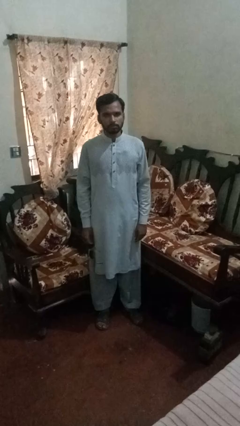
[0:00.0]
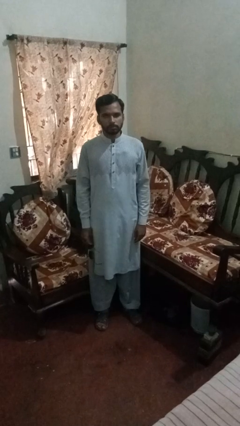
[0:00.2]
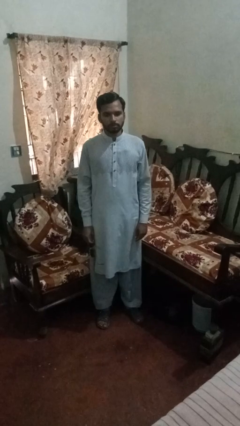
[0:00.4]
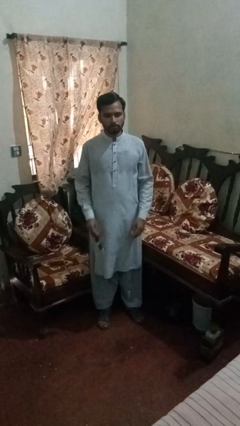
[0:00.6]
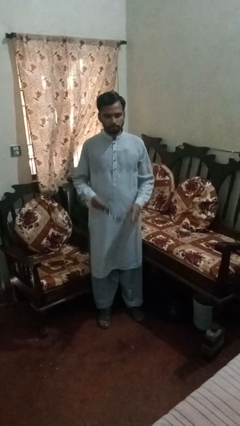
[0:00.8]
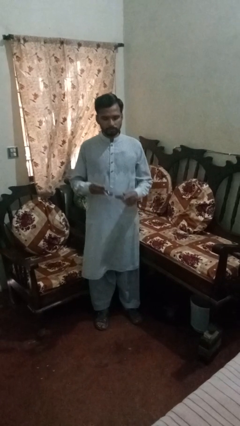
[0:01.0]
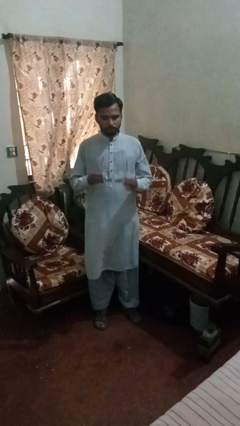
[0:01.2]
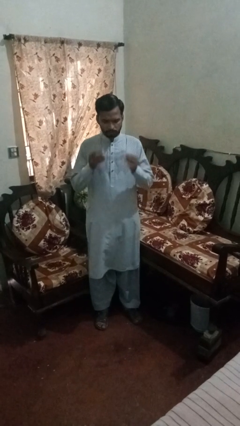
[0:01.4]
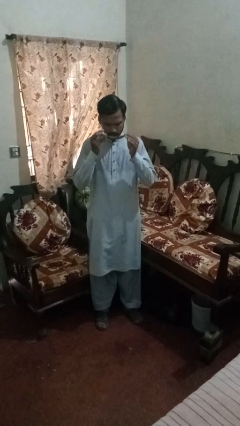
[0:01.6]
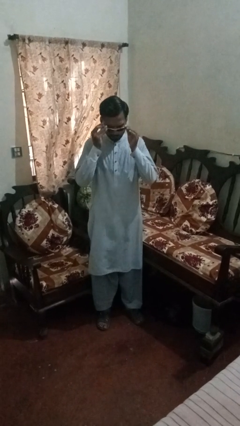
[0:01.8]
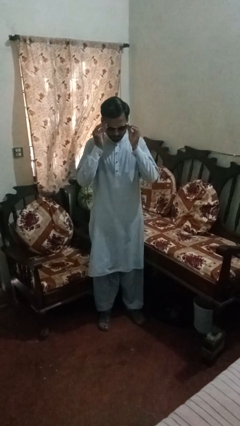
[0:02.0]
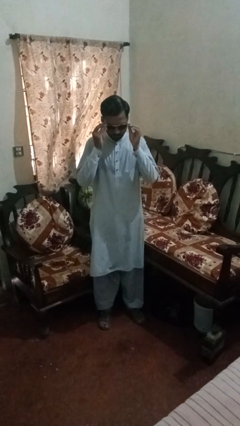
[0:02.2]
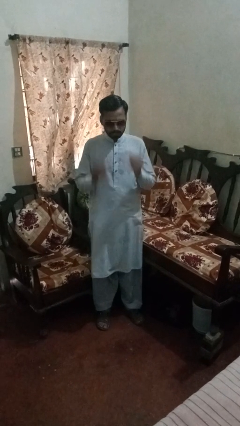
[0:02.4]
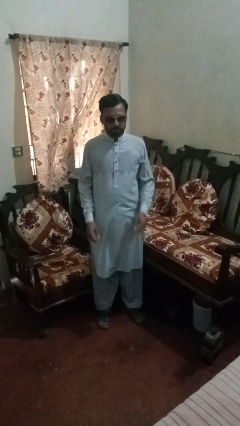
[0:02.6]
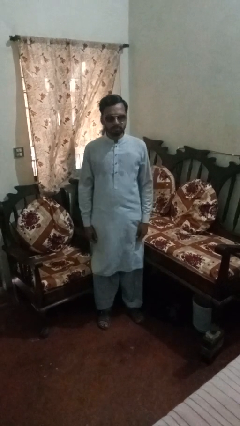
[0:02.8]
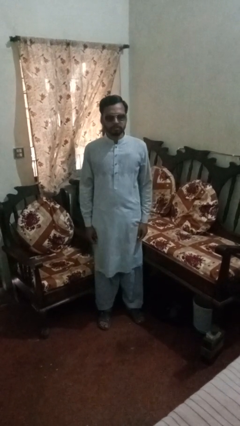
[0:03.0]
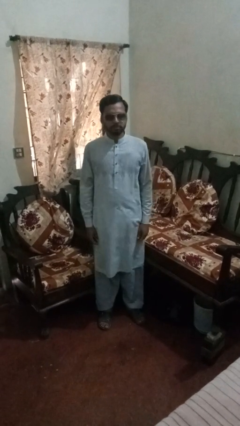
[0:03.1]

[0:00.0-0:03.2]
person puts on sunglasses

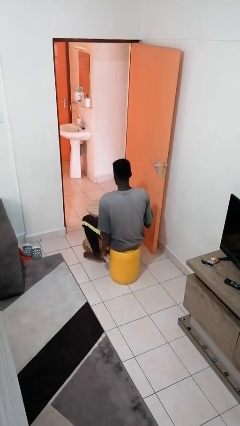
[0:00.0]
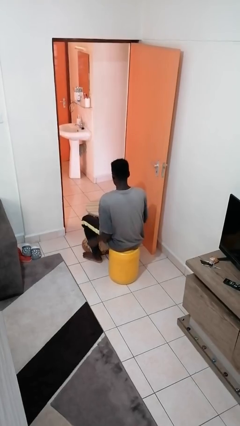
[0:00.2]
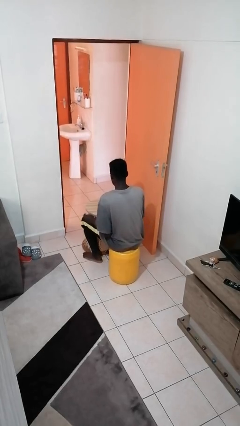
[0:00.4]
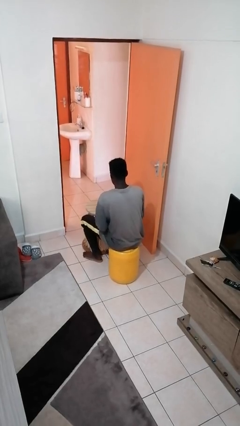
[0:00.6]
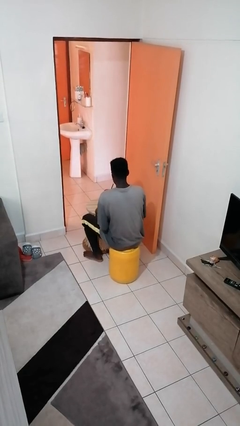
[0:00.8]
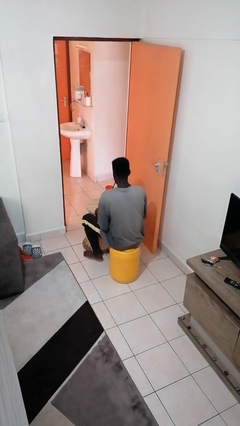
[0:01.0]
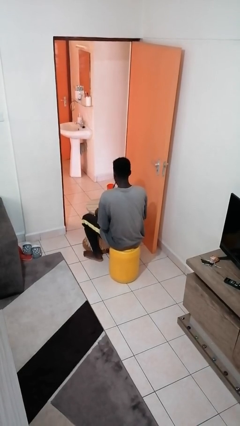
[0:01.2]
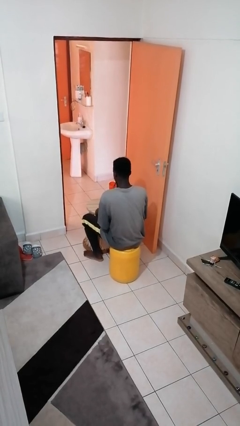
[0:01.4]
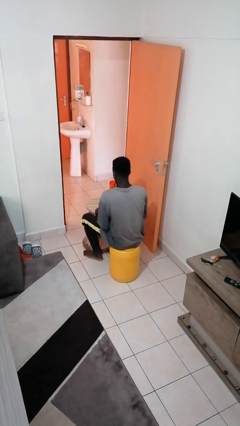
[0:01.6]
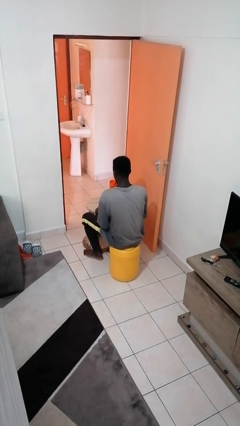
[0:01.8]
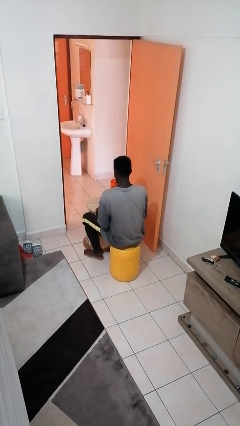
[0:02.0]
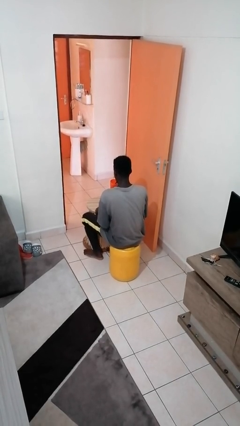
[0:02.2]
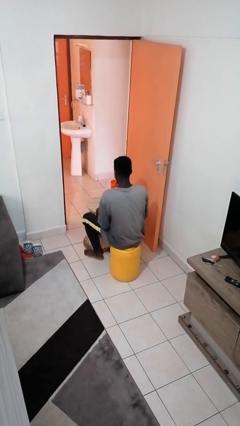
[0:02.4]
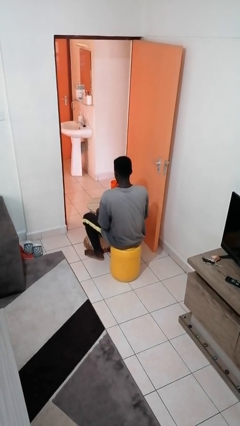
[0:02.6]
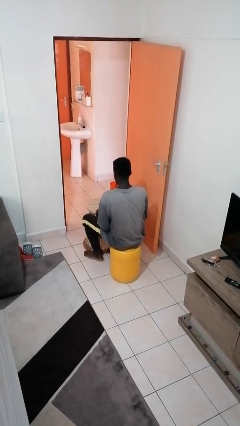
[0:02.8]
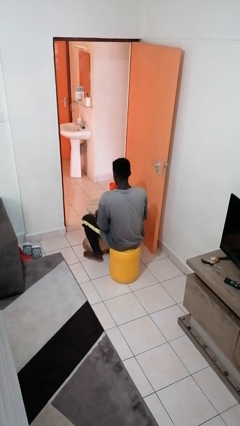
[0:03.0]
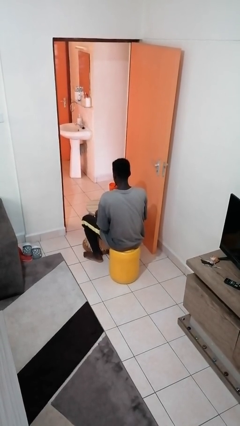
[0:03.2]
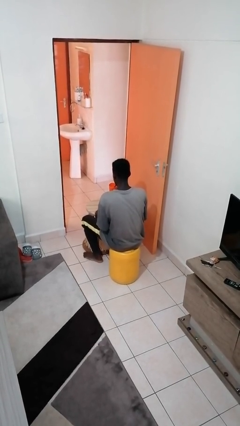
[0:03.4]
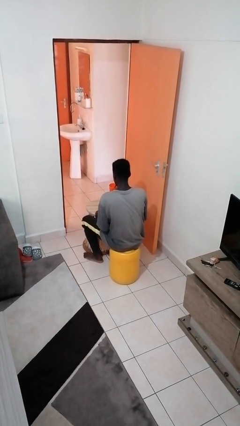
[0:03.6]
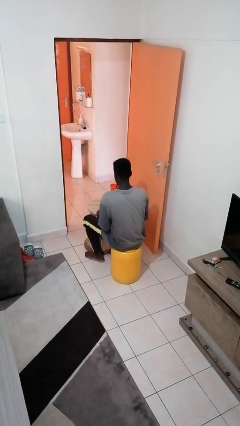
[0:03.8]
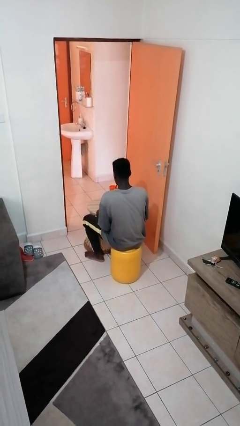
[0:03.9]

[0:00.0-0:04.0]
person drinks from straw

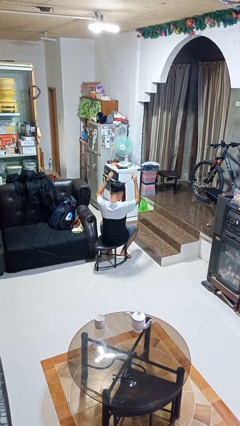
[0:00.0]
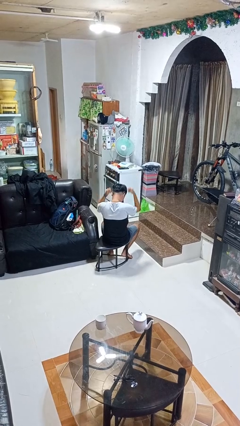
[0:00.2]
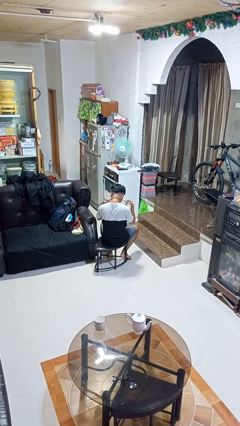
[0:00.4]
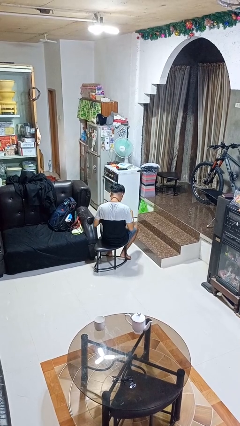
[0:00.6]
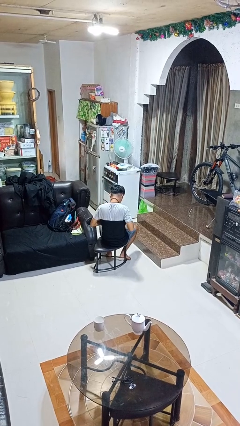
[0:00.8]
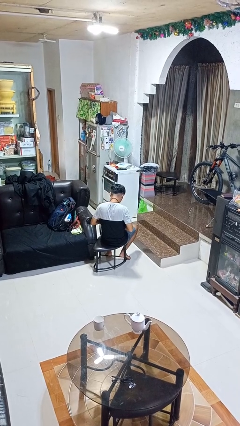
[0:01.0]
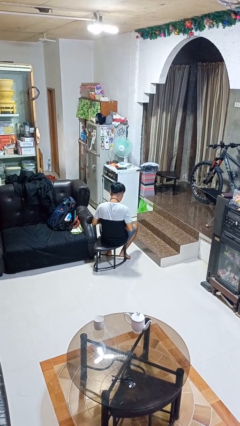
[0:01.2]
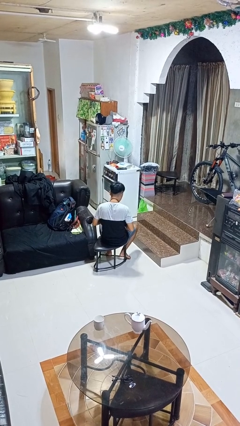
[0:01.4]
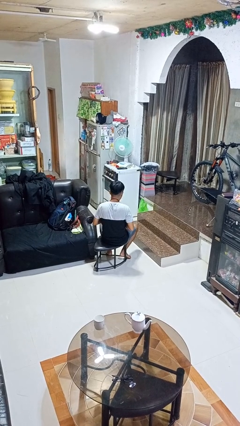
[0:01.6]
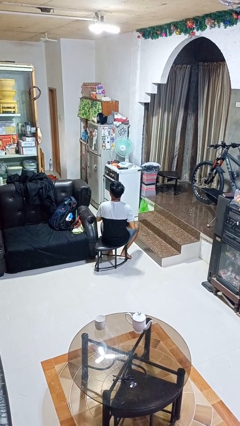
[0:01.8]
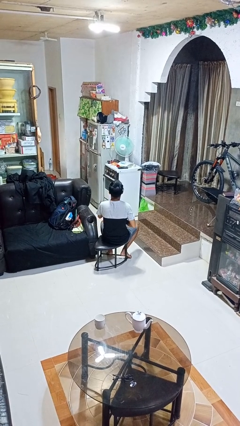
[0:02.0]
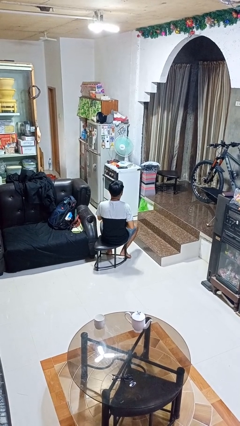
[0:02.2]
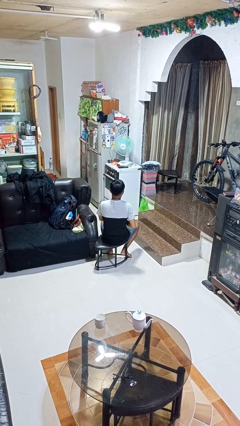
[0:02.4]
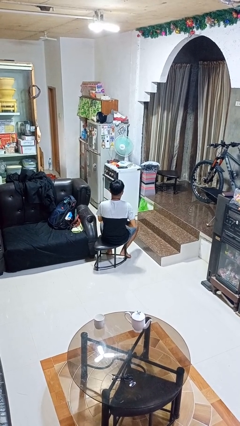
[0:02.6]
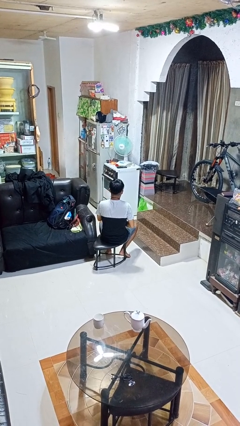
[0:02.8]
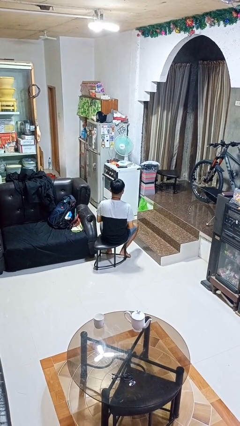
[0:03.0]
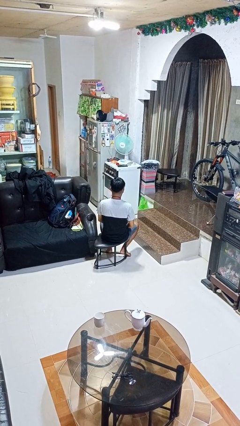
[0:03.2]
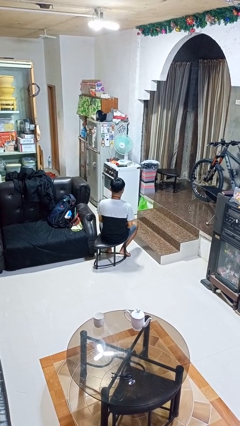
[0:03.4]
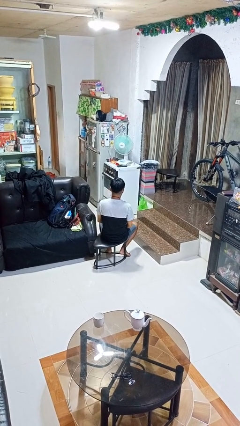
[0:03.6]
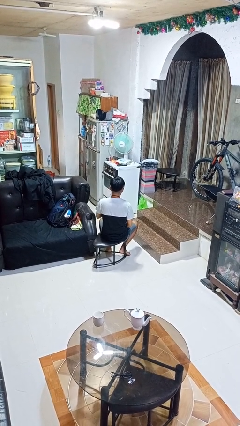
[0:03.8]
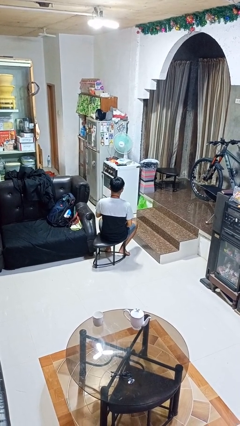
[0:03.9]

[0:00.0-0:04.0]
person puts on necktie

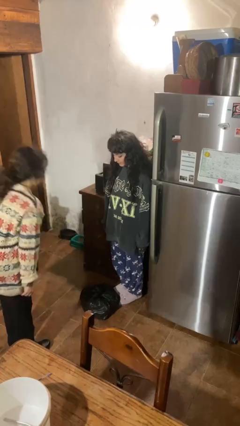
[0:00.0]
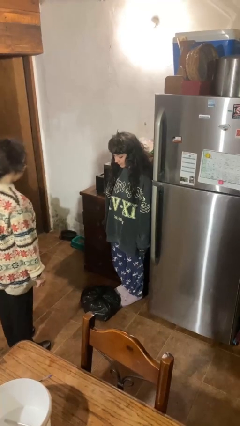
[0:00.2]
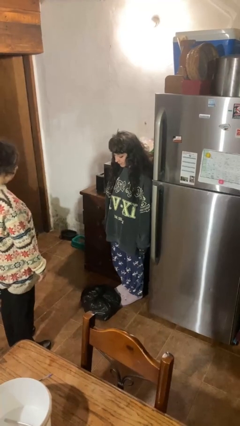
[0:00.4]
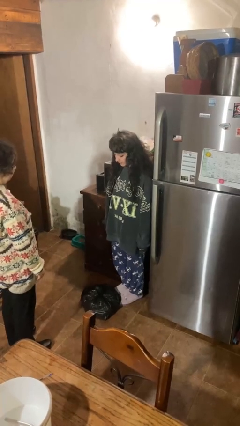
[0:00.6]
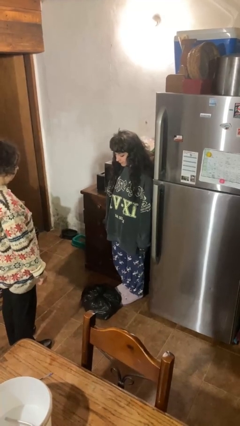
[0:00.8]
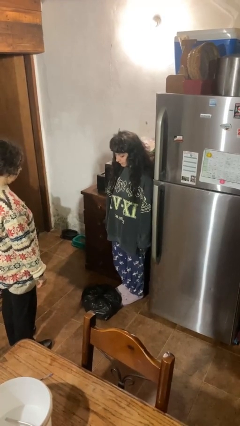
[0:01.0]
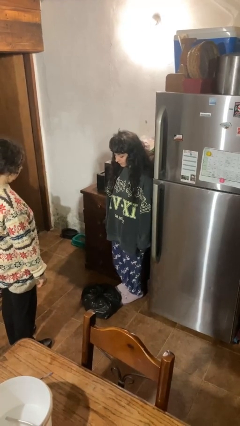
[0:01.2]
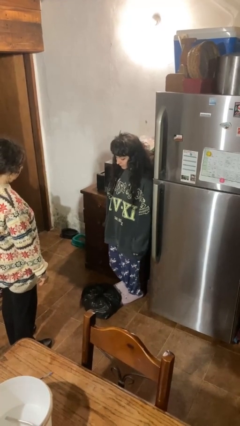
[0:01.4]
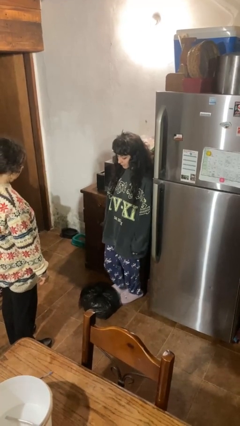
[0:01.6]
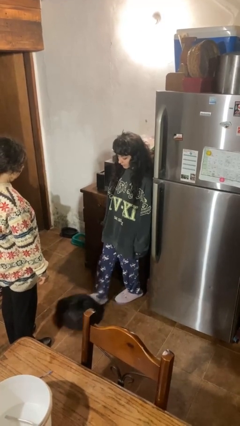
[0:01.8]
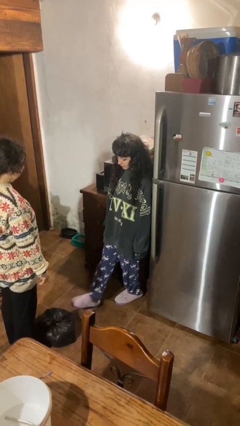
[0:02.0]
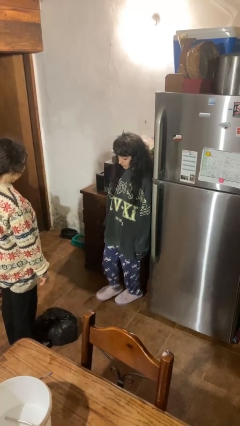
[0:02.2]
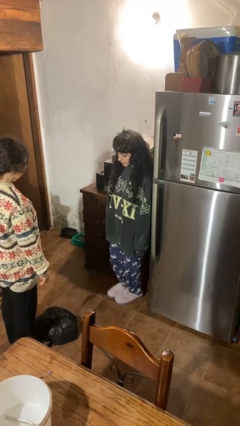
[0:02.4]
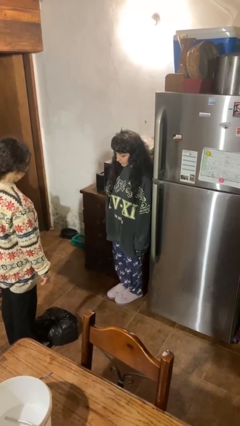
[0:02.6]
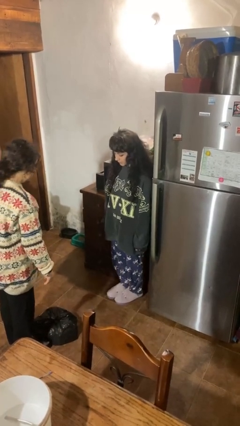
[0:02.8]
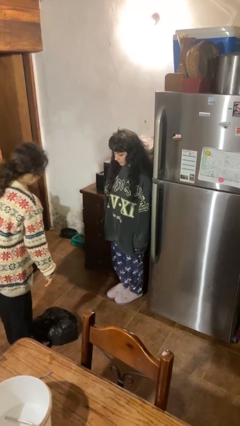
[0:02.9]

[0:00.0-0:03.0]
person kicks object to person

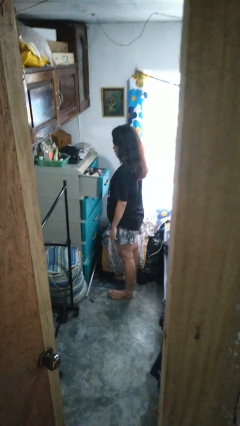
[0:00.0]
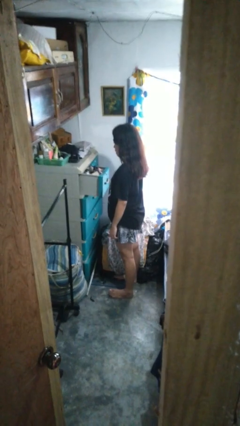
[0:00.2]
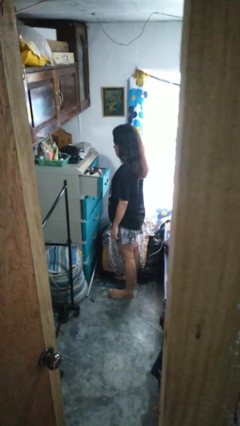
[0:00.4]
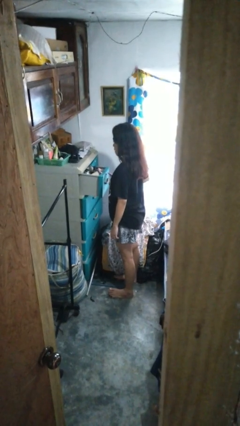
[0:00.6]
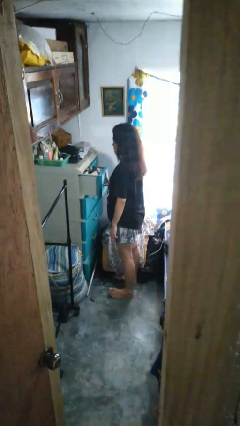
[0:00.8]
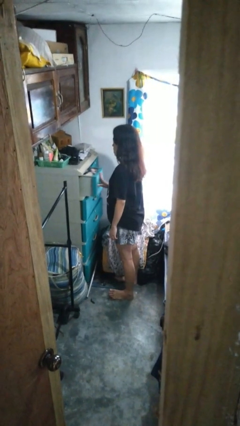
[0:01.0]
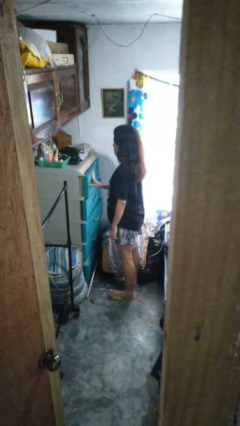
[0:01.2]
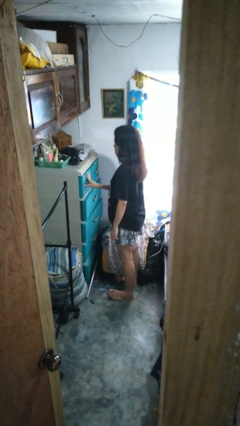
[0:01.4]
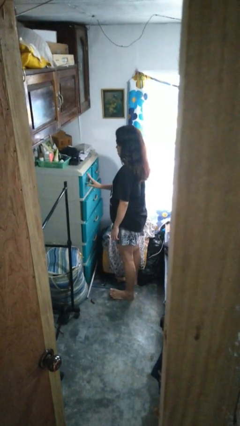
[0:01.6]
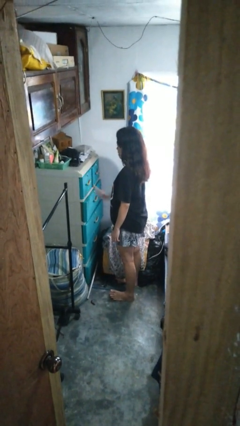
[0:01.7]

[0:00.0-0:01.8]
person closes dresser drawer

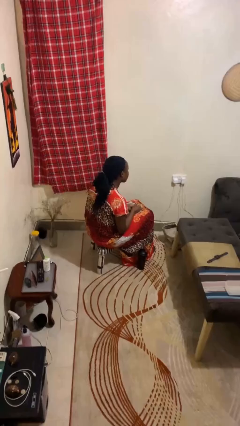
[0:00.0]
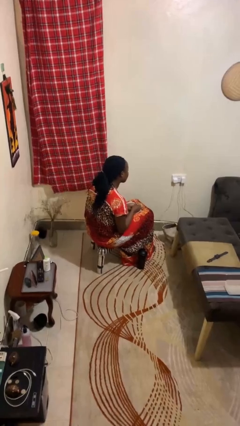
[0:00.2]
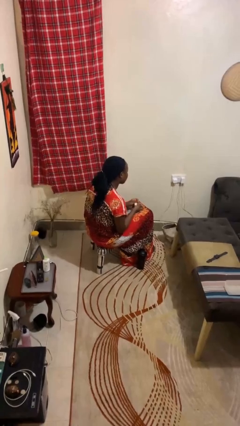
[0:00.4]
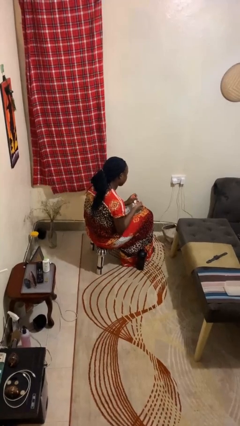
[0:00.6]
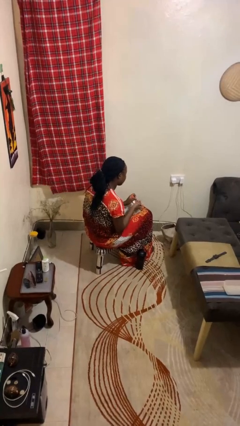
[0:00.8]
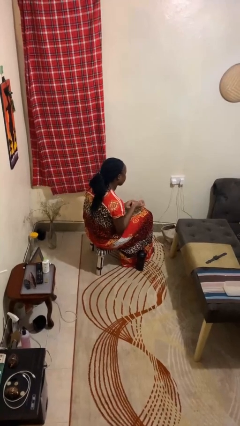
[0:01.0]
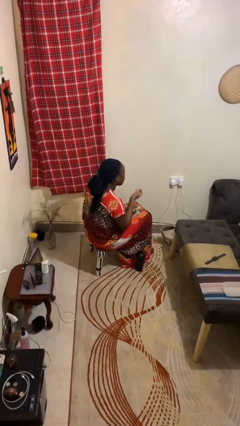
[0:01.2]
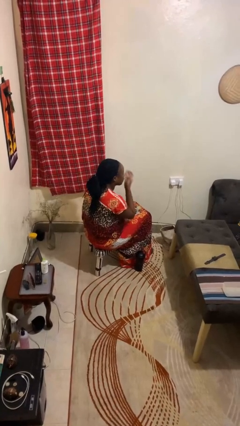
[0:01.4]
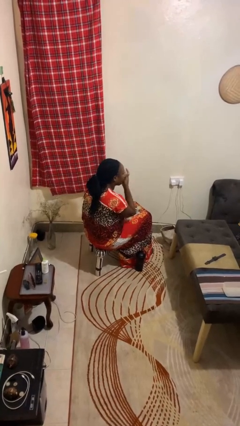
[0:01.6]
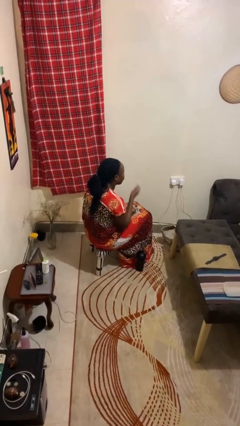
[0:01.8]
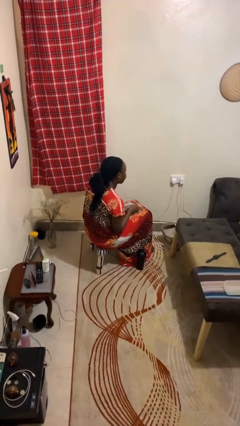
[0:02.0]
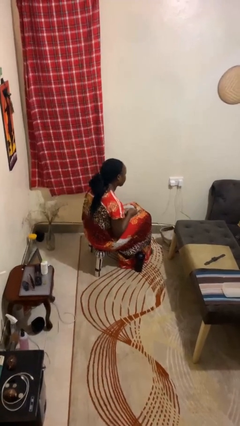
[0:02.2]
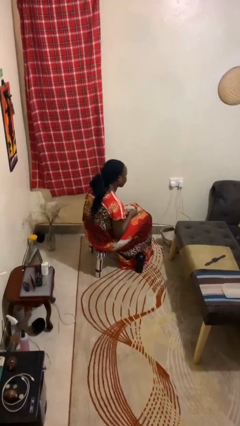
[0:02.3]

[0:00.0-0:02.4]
person takes medicine pills
